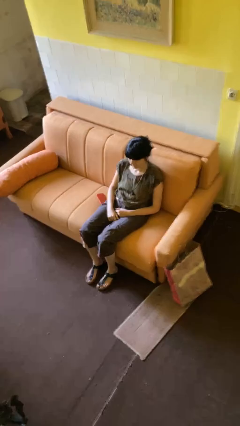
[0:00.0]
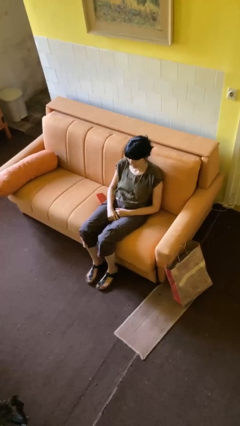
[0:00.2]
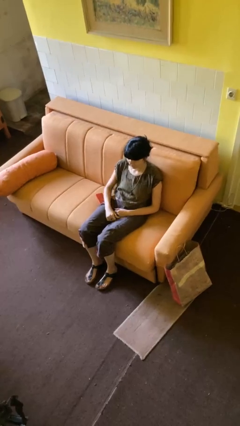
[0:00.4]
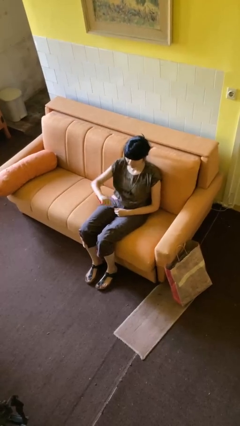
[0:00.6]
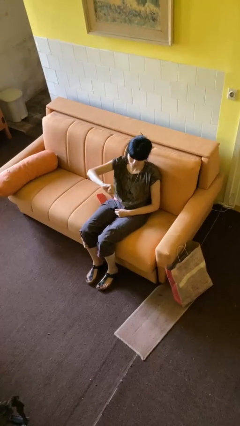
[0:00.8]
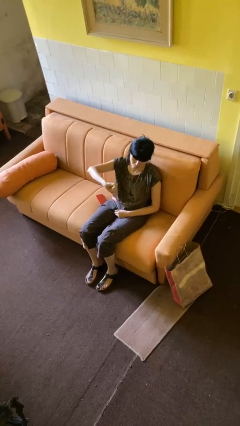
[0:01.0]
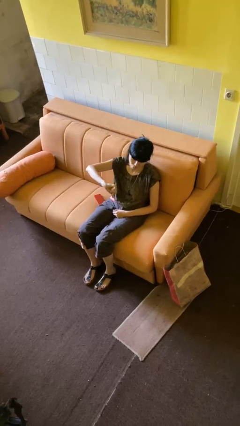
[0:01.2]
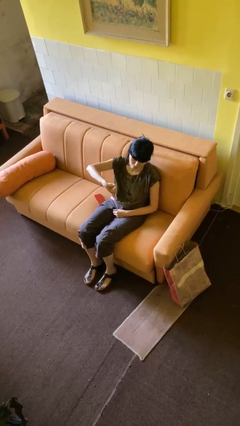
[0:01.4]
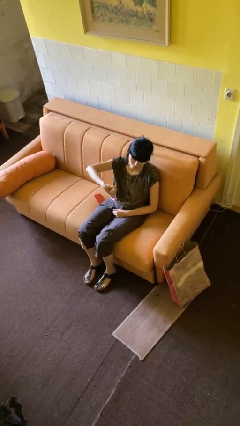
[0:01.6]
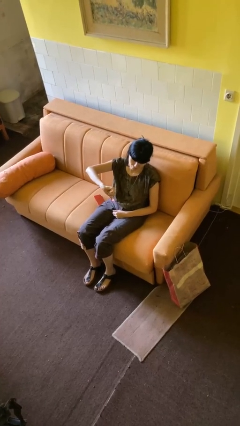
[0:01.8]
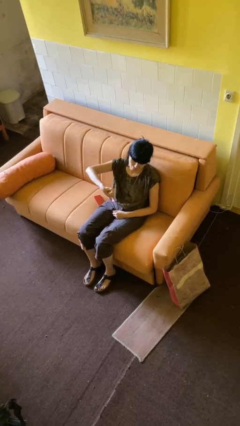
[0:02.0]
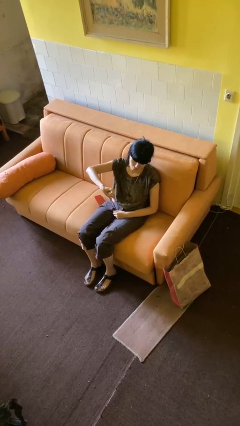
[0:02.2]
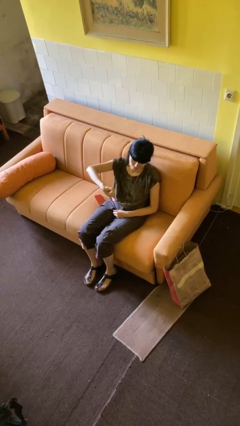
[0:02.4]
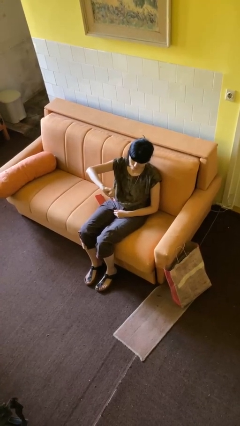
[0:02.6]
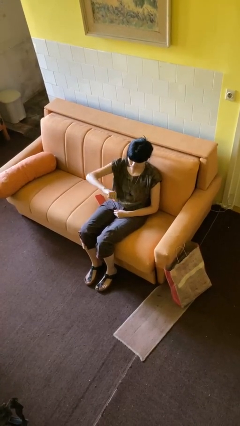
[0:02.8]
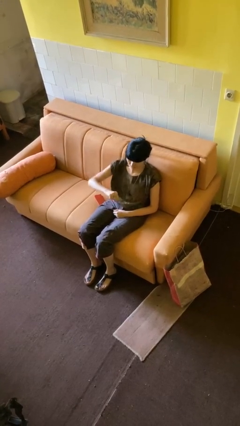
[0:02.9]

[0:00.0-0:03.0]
person gestures thumbs down

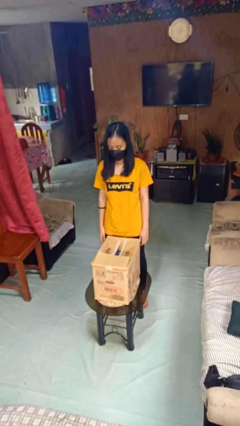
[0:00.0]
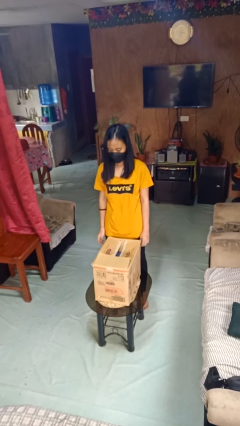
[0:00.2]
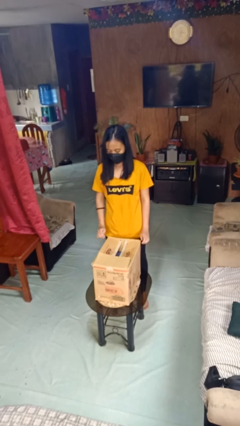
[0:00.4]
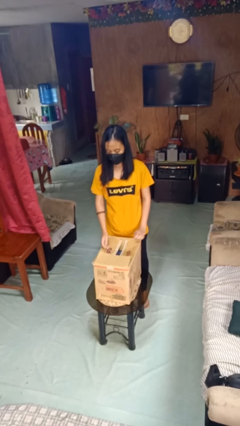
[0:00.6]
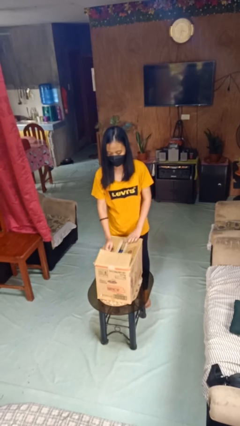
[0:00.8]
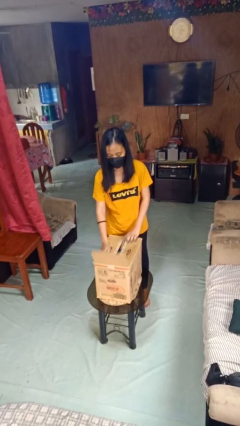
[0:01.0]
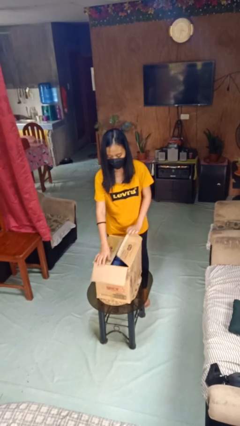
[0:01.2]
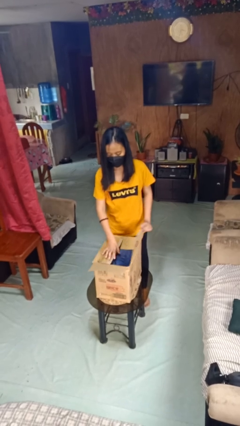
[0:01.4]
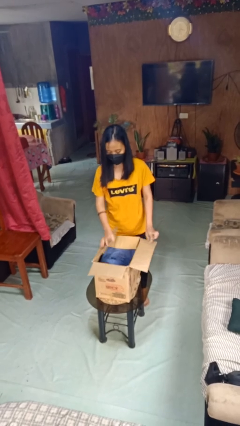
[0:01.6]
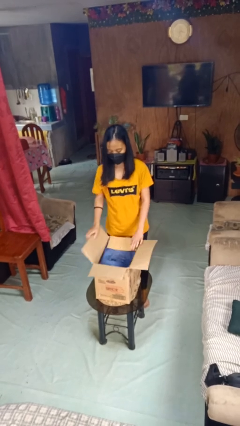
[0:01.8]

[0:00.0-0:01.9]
person opens box

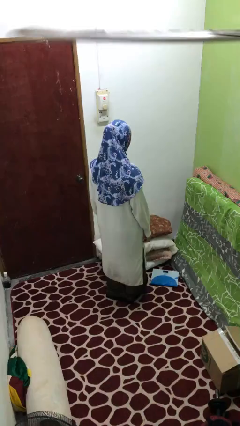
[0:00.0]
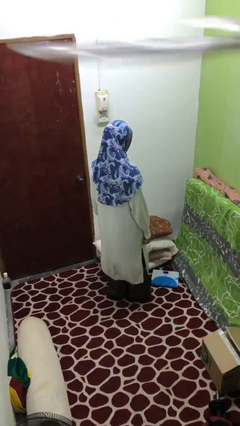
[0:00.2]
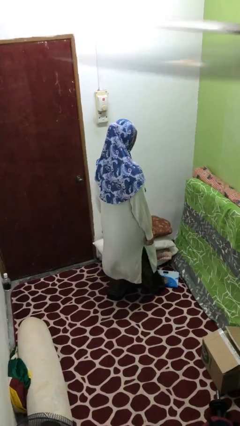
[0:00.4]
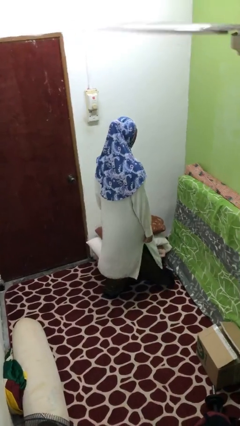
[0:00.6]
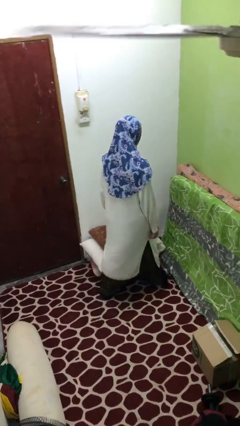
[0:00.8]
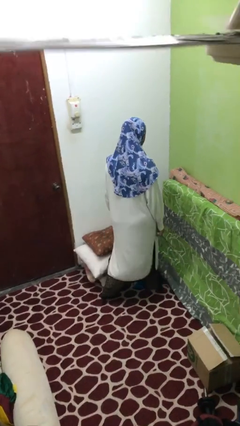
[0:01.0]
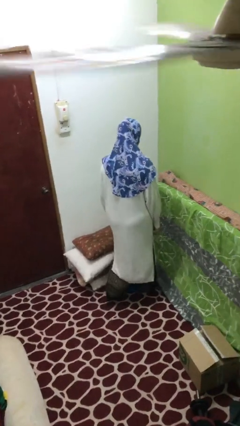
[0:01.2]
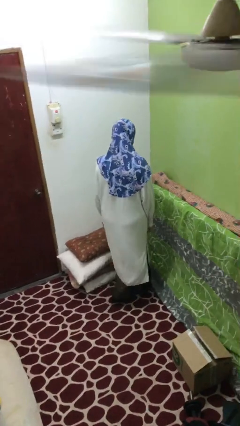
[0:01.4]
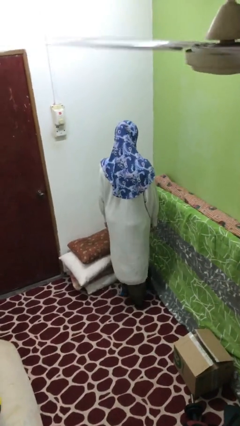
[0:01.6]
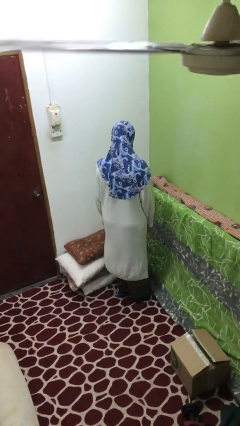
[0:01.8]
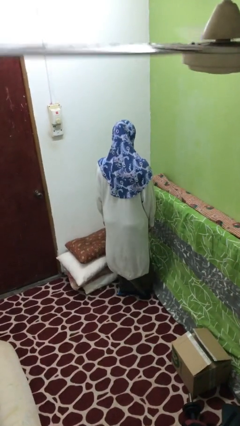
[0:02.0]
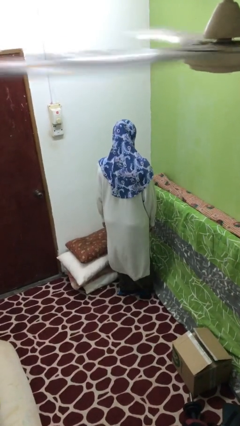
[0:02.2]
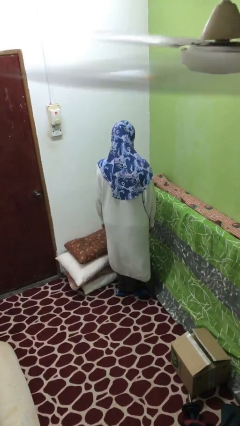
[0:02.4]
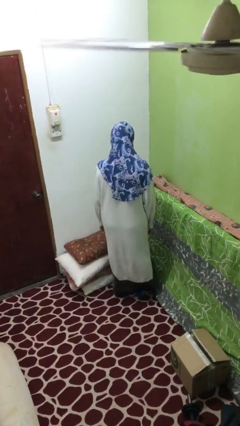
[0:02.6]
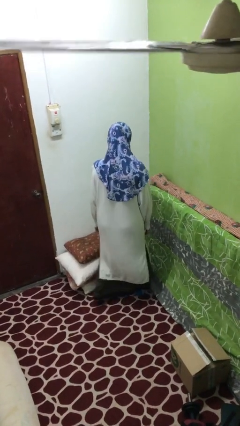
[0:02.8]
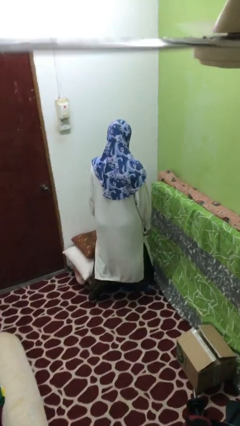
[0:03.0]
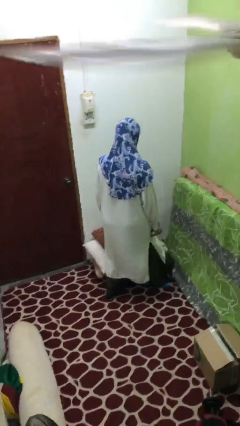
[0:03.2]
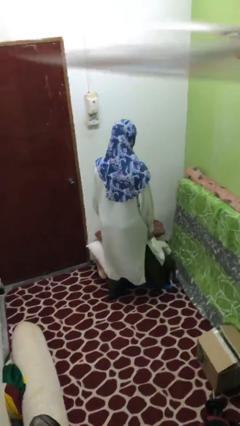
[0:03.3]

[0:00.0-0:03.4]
person uses bodyweight scale

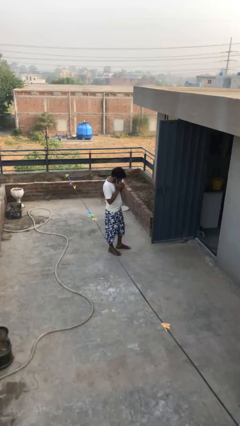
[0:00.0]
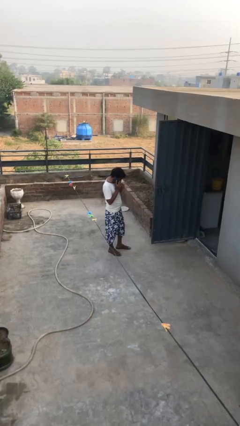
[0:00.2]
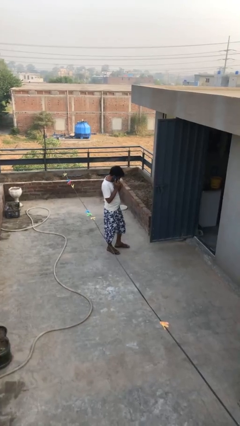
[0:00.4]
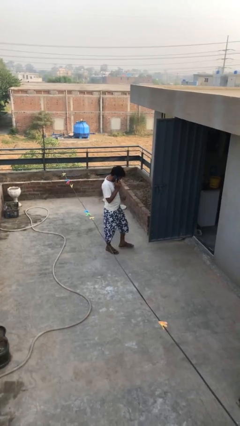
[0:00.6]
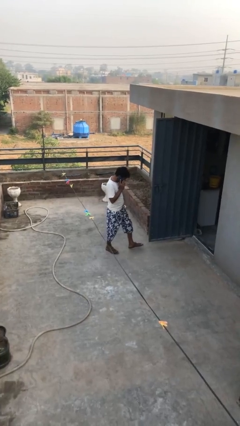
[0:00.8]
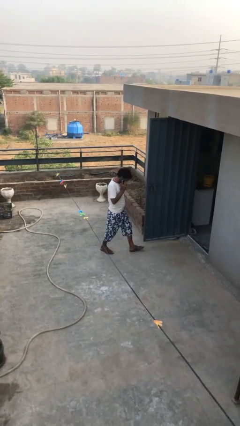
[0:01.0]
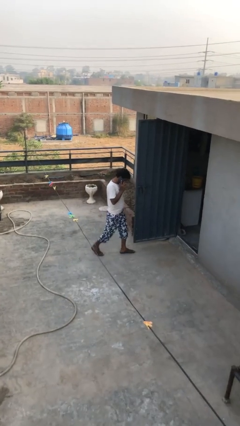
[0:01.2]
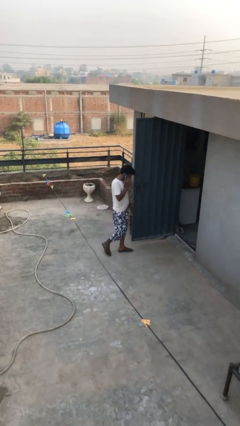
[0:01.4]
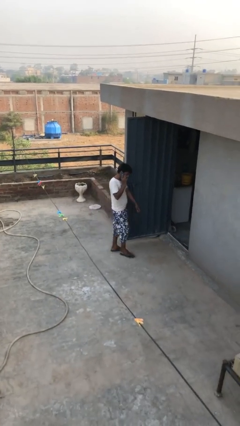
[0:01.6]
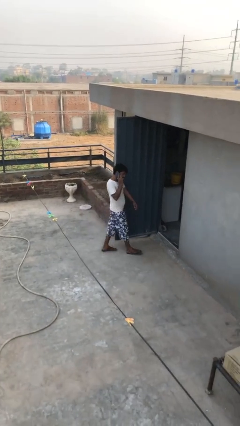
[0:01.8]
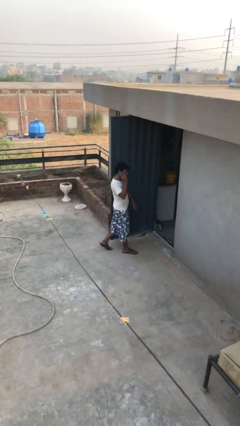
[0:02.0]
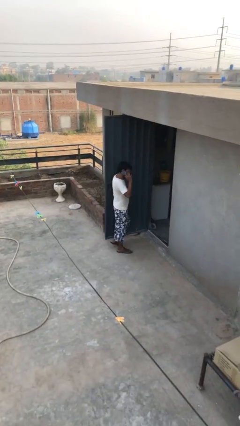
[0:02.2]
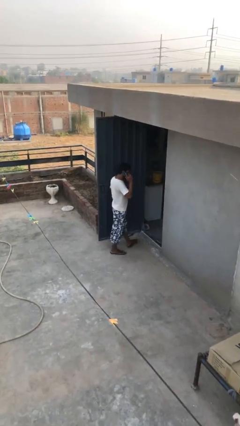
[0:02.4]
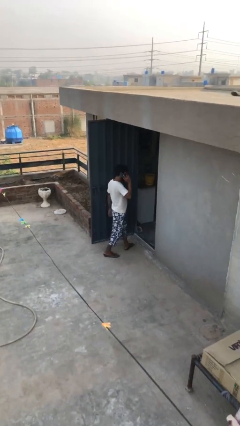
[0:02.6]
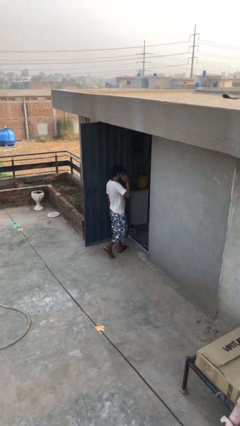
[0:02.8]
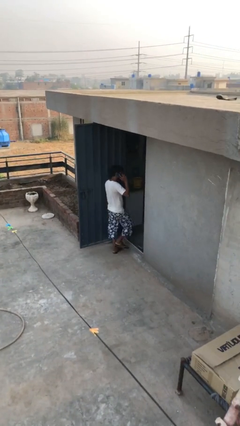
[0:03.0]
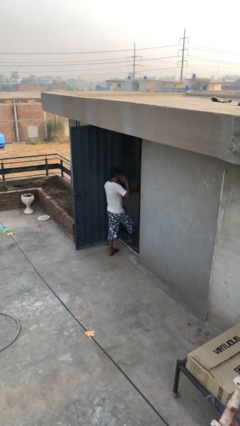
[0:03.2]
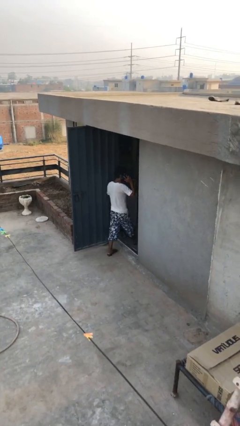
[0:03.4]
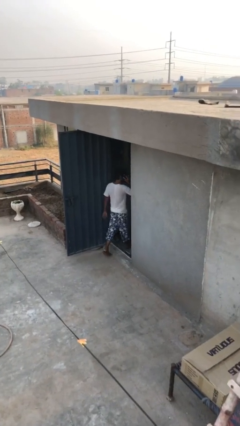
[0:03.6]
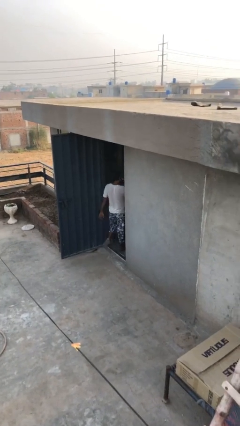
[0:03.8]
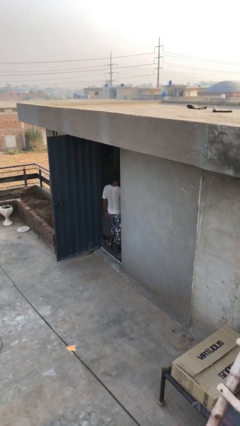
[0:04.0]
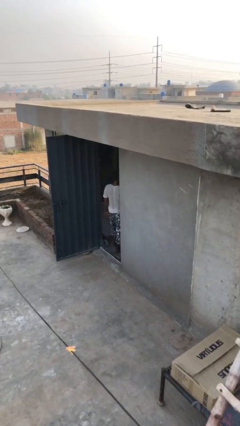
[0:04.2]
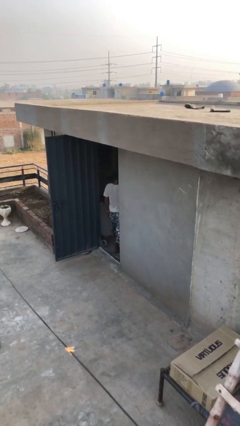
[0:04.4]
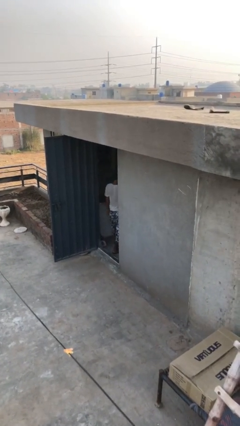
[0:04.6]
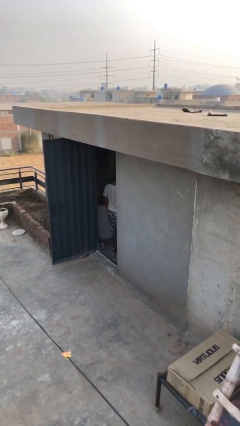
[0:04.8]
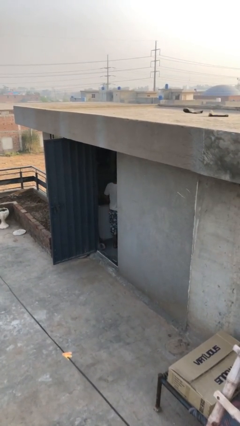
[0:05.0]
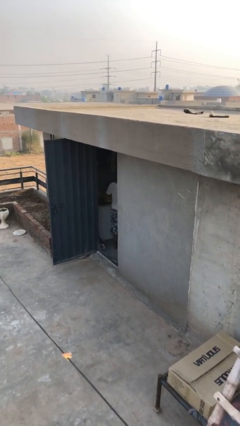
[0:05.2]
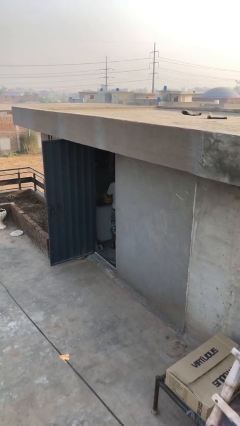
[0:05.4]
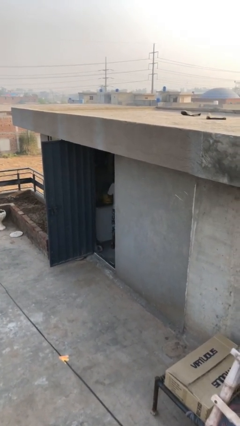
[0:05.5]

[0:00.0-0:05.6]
person exits scene through structure

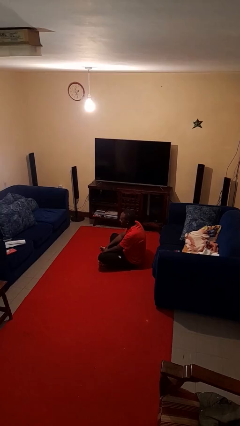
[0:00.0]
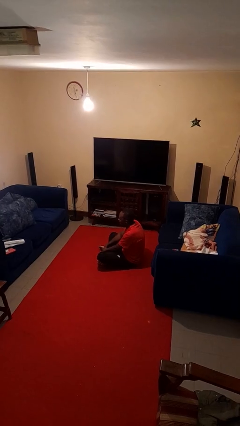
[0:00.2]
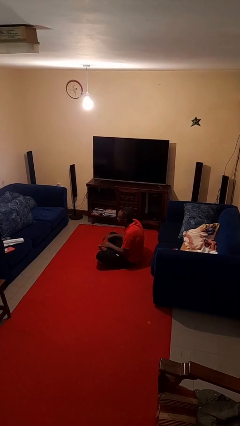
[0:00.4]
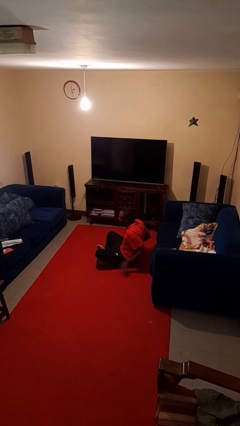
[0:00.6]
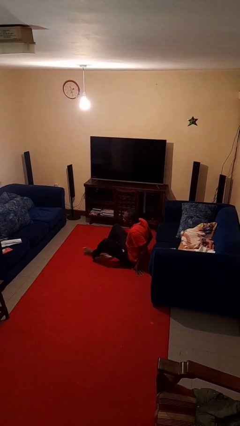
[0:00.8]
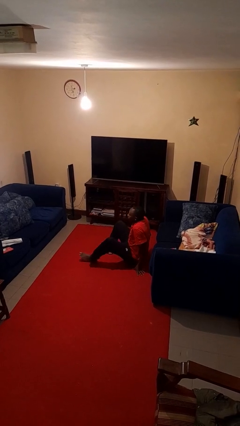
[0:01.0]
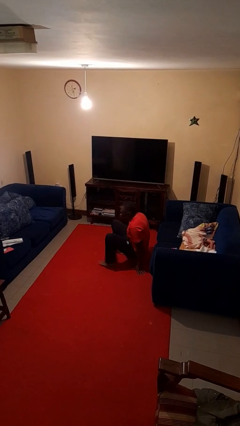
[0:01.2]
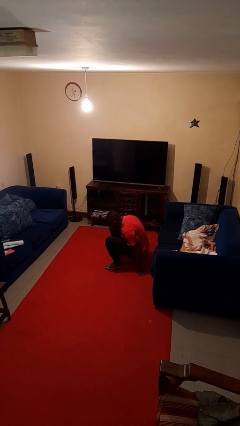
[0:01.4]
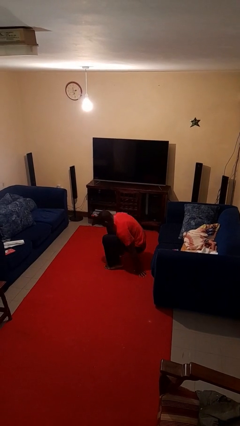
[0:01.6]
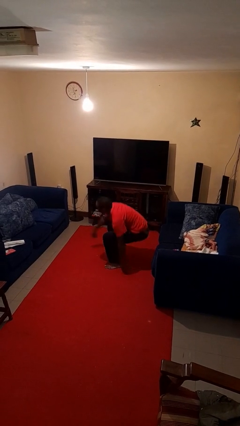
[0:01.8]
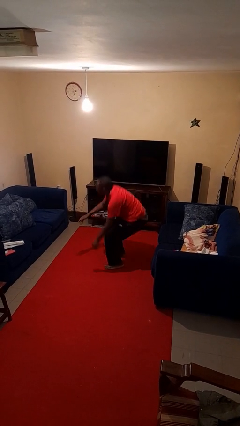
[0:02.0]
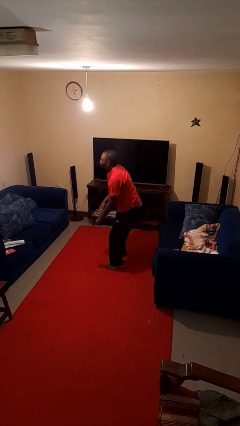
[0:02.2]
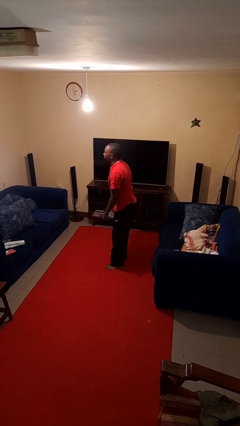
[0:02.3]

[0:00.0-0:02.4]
person stands up from floor

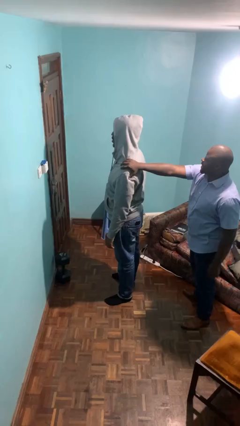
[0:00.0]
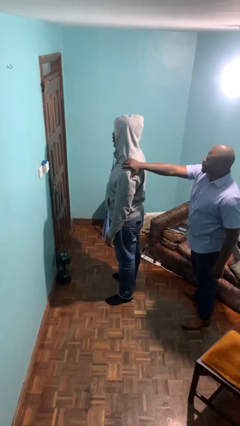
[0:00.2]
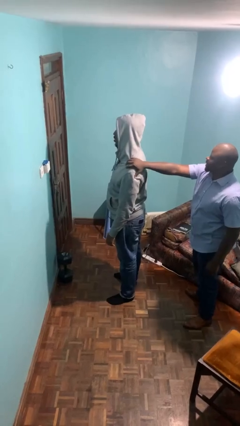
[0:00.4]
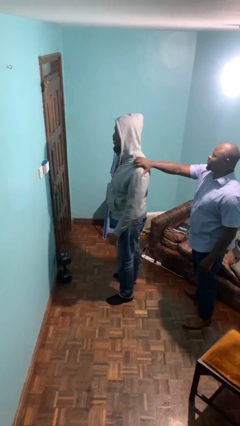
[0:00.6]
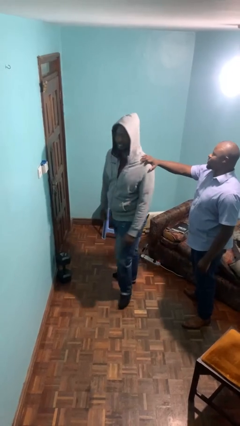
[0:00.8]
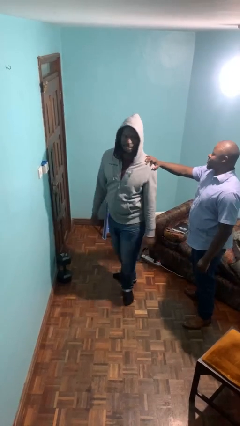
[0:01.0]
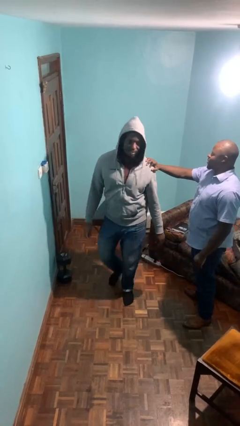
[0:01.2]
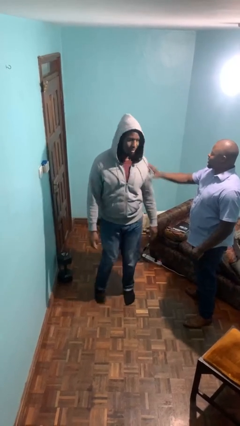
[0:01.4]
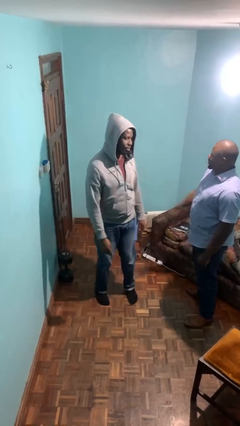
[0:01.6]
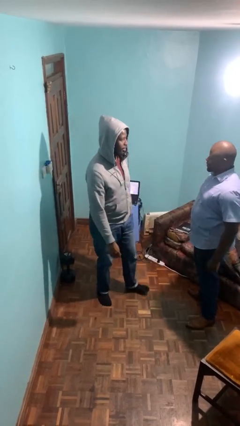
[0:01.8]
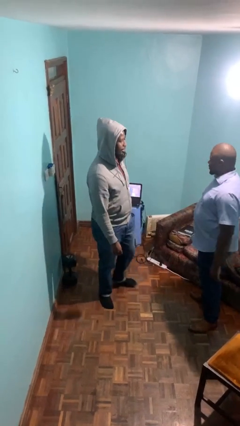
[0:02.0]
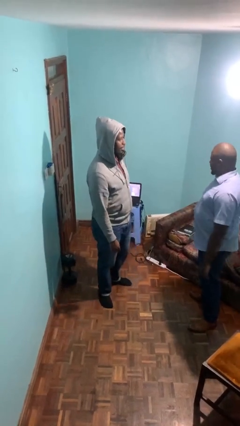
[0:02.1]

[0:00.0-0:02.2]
person spins person around
